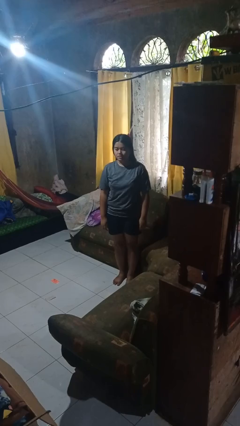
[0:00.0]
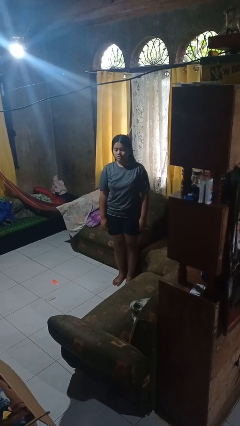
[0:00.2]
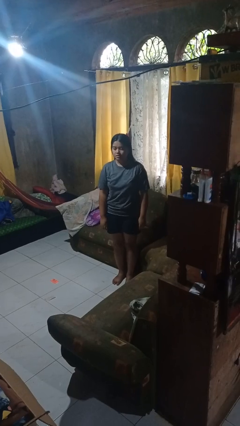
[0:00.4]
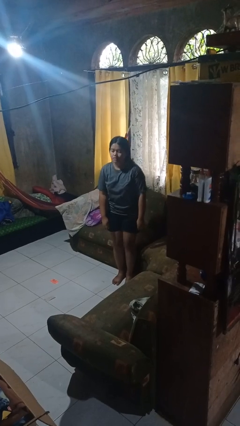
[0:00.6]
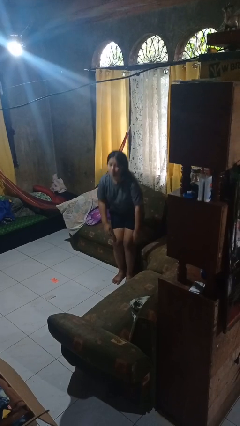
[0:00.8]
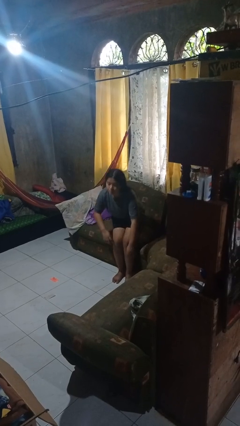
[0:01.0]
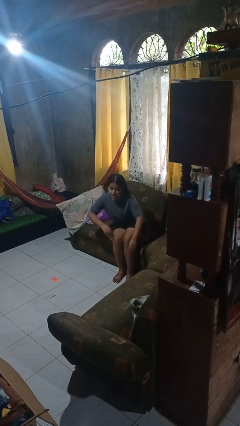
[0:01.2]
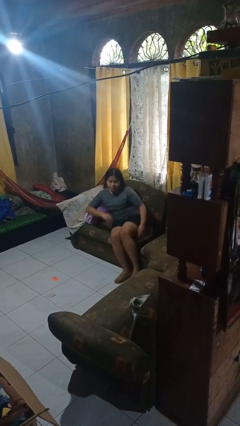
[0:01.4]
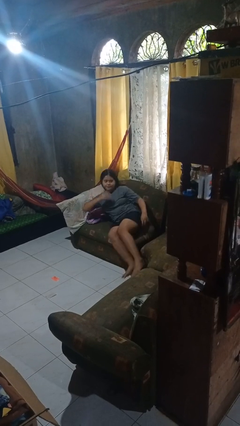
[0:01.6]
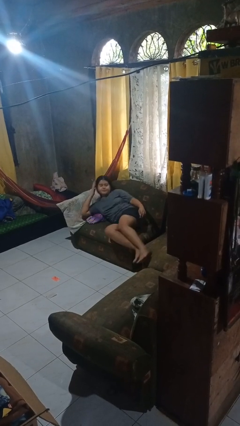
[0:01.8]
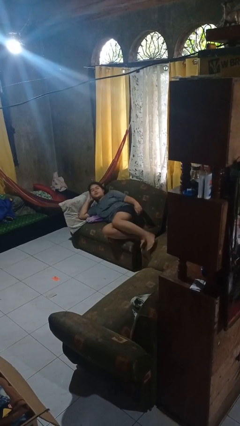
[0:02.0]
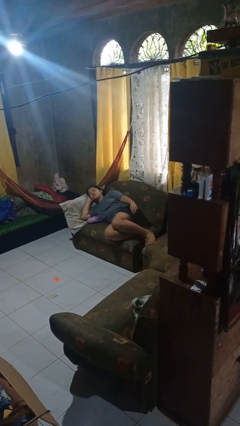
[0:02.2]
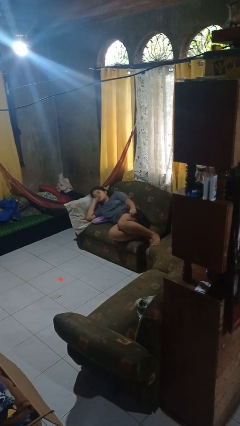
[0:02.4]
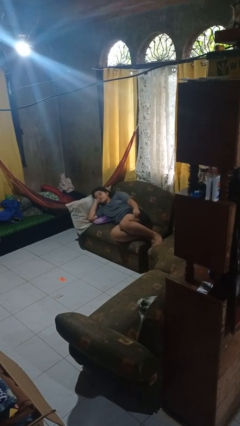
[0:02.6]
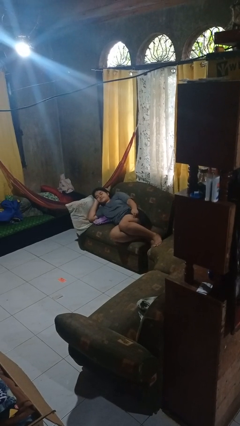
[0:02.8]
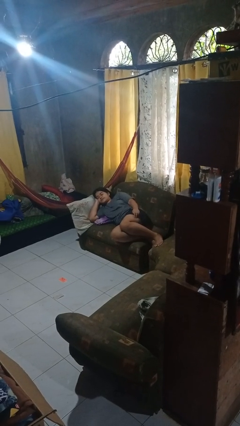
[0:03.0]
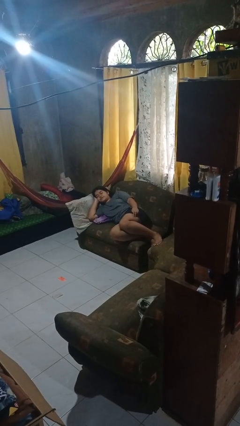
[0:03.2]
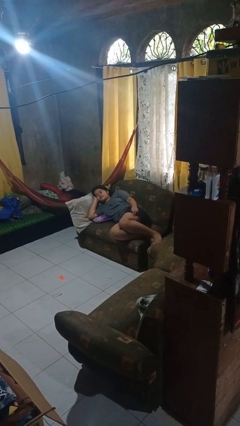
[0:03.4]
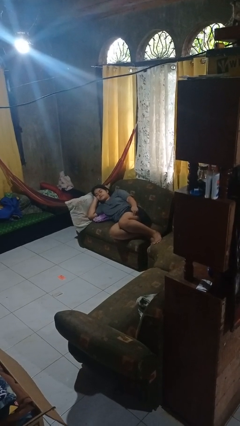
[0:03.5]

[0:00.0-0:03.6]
person lies down on couch

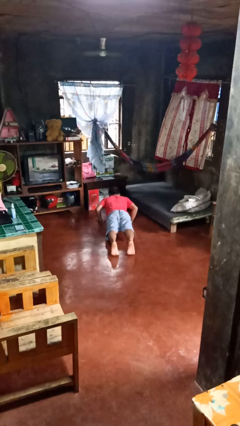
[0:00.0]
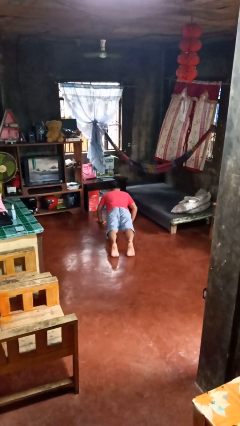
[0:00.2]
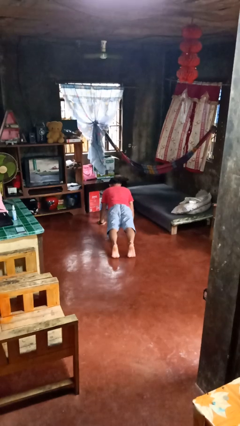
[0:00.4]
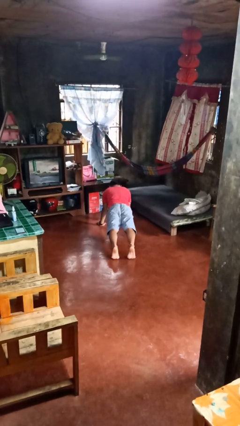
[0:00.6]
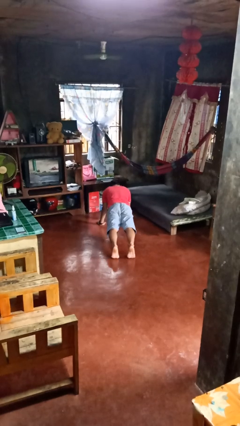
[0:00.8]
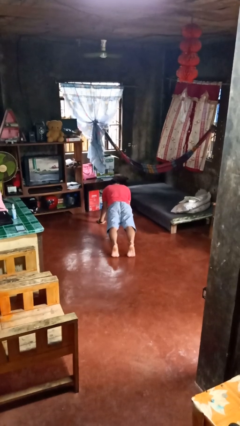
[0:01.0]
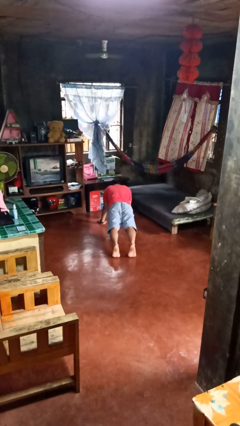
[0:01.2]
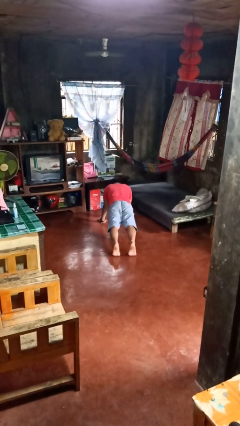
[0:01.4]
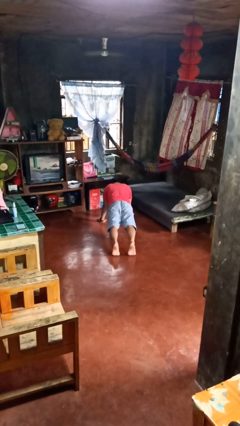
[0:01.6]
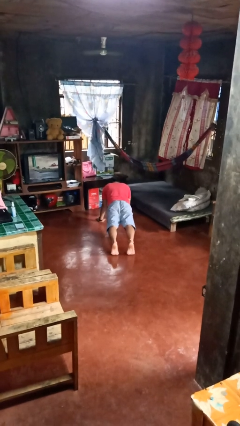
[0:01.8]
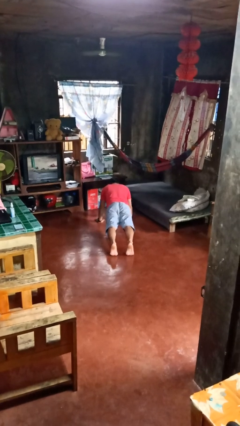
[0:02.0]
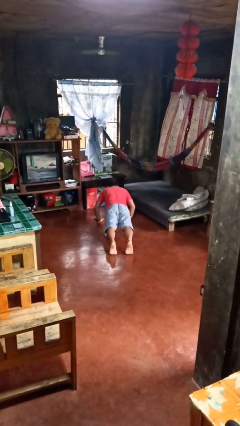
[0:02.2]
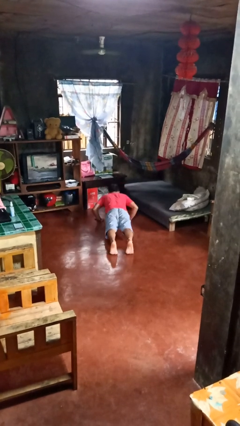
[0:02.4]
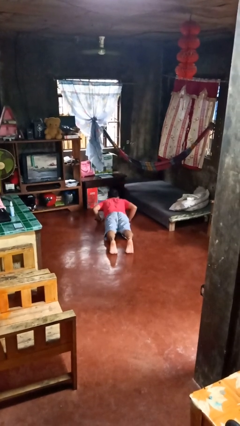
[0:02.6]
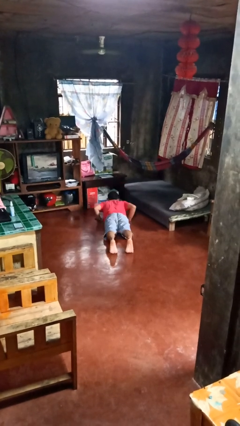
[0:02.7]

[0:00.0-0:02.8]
person exercises with pushup

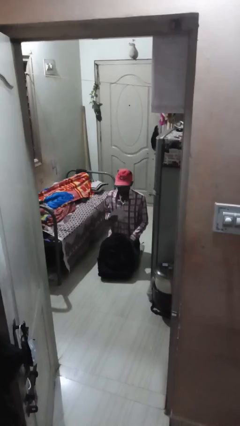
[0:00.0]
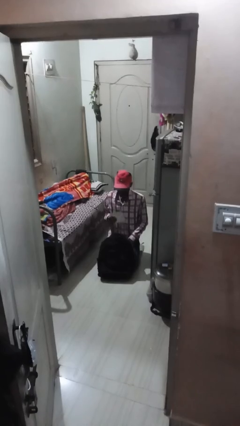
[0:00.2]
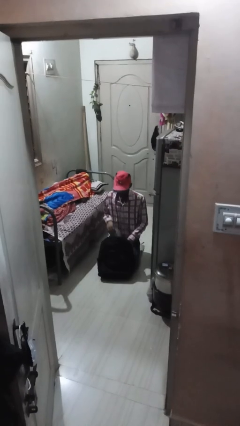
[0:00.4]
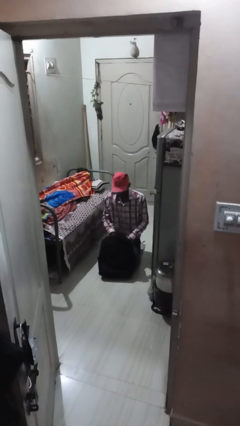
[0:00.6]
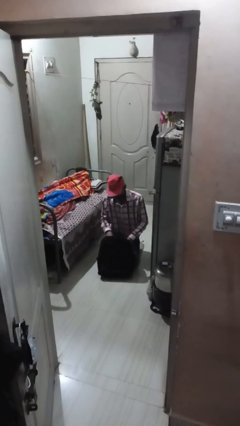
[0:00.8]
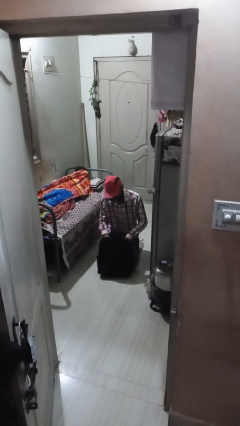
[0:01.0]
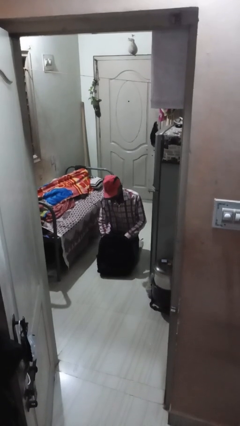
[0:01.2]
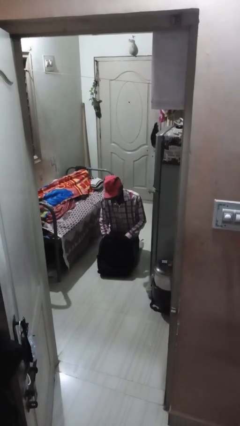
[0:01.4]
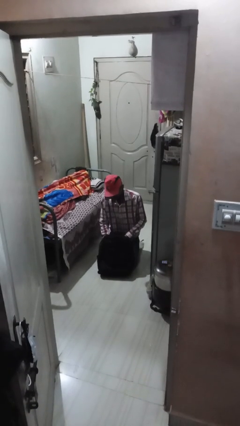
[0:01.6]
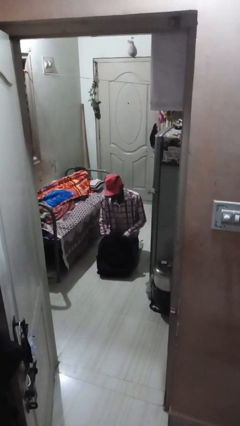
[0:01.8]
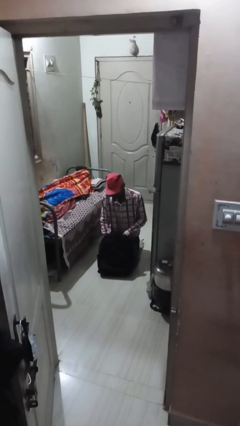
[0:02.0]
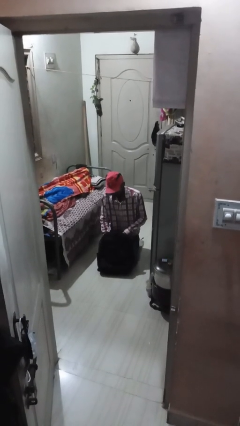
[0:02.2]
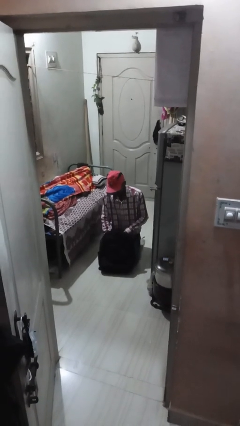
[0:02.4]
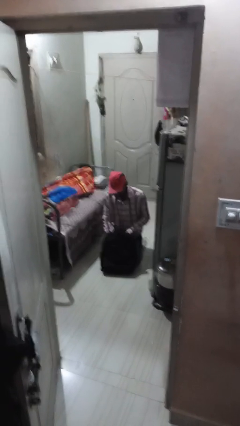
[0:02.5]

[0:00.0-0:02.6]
person puts object into backpack

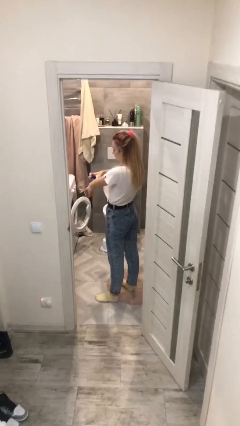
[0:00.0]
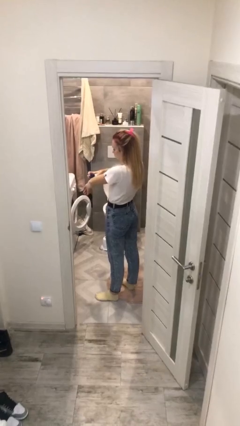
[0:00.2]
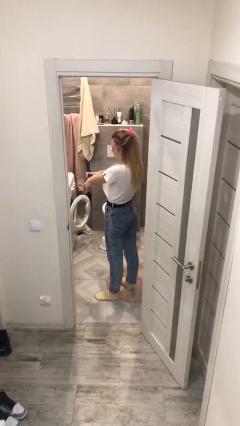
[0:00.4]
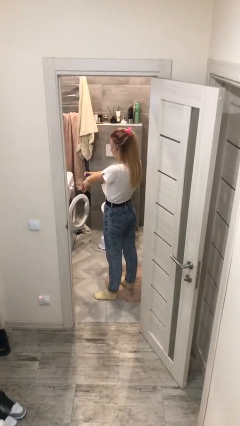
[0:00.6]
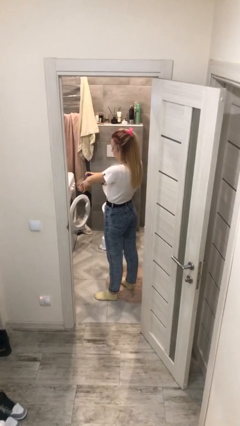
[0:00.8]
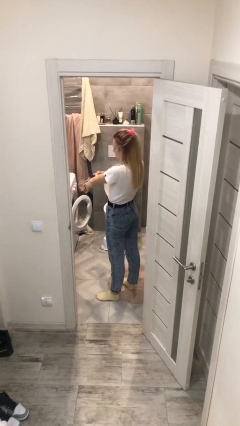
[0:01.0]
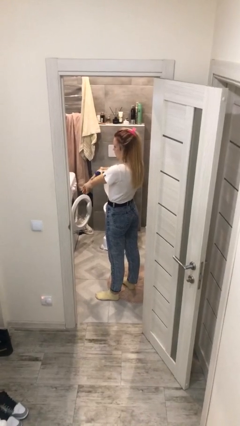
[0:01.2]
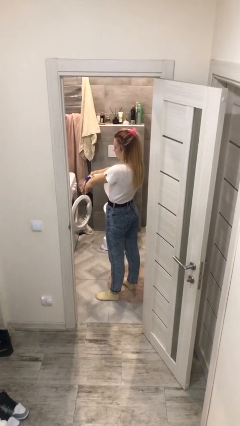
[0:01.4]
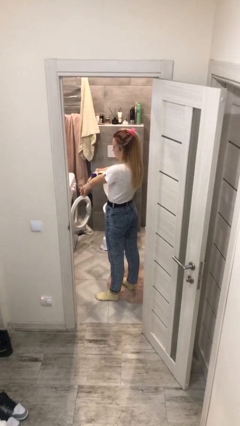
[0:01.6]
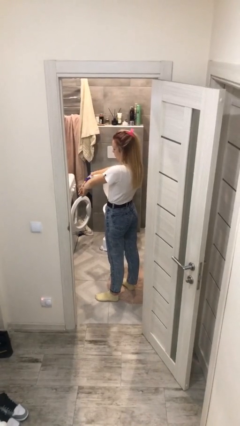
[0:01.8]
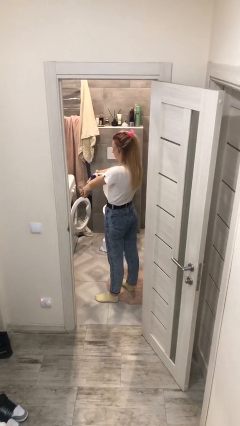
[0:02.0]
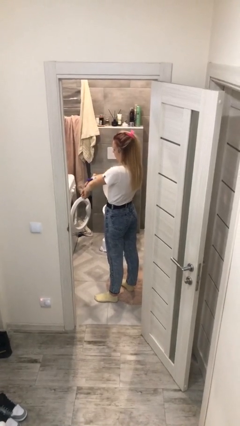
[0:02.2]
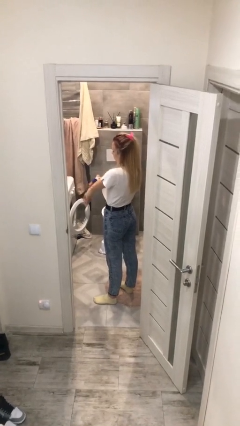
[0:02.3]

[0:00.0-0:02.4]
person applies sunscreen

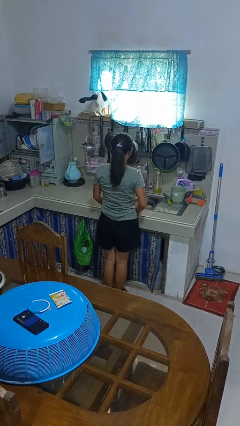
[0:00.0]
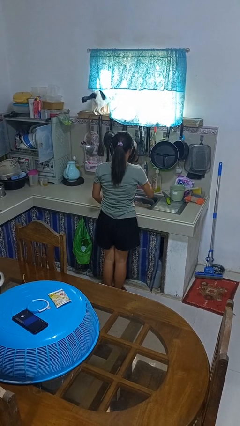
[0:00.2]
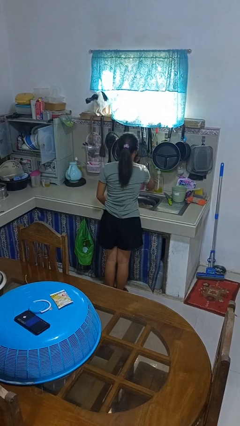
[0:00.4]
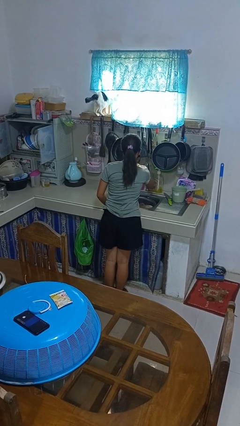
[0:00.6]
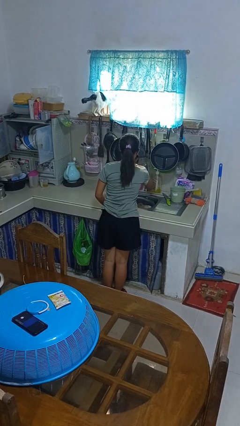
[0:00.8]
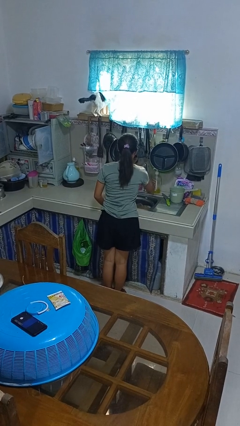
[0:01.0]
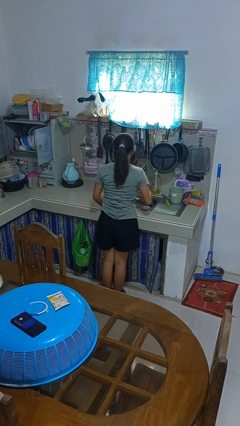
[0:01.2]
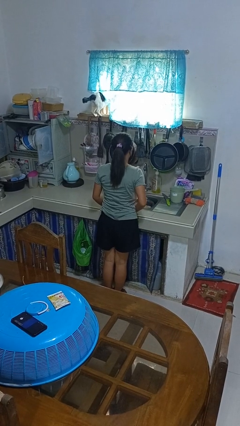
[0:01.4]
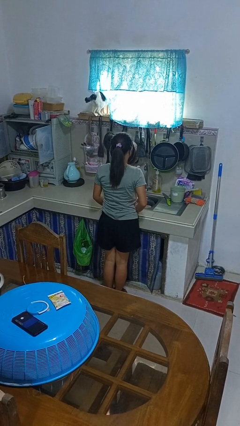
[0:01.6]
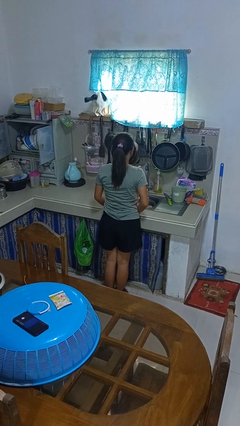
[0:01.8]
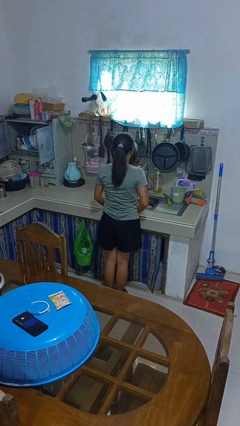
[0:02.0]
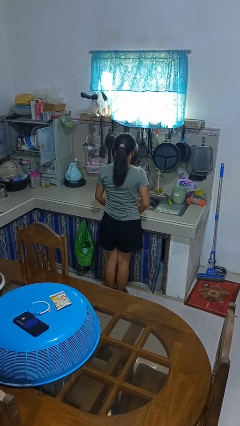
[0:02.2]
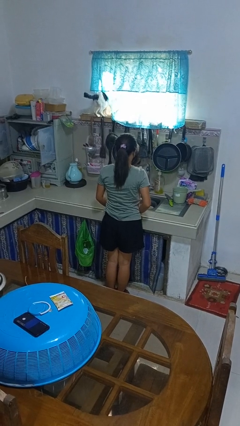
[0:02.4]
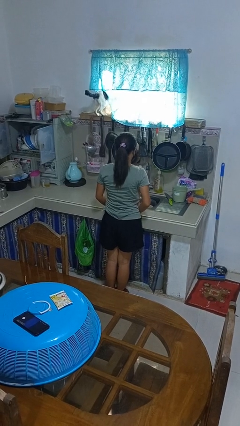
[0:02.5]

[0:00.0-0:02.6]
person turns on faucet

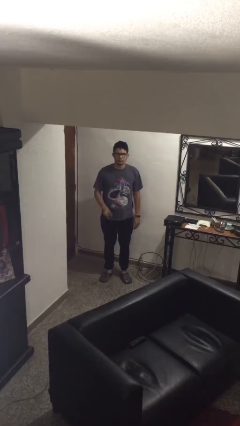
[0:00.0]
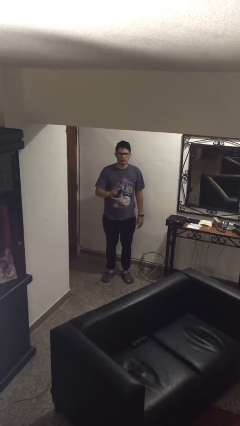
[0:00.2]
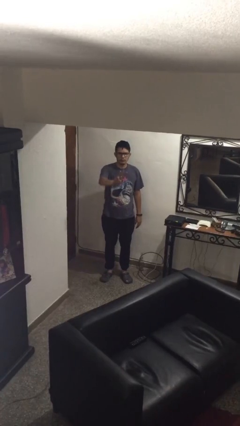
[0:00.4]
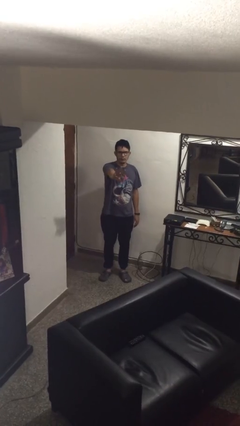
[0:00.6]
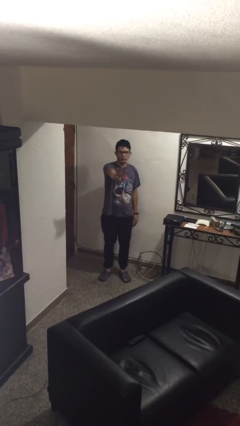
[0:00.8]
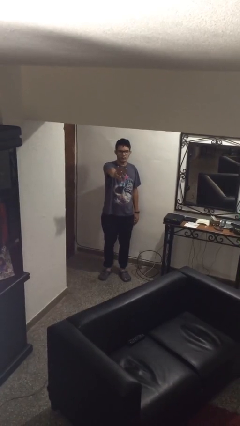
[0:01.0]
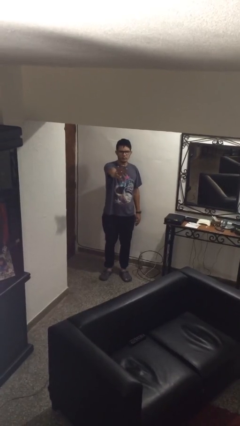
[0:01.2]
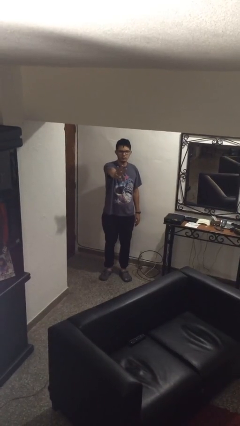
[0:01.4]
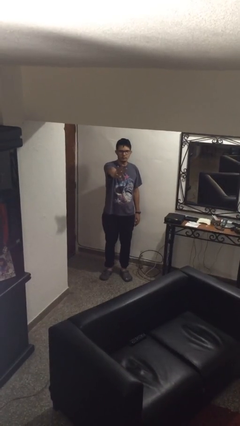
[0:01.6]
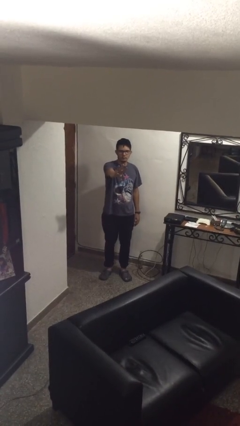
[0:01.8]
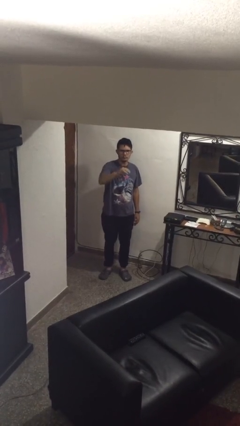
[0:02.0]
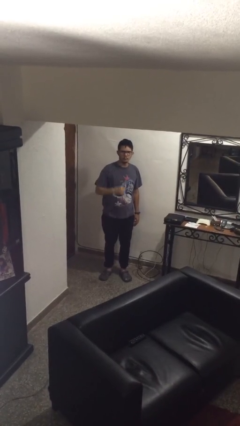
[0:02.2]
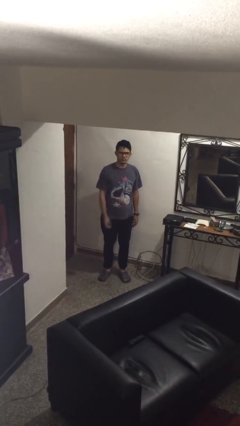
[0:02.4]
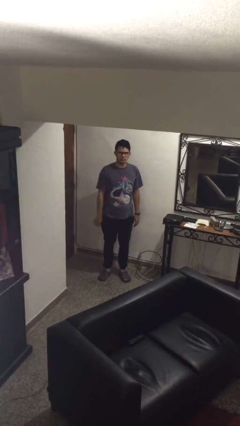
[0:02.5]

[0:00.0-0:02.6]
person gestures number three

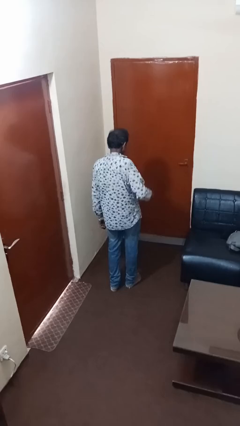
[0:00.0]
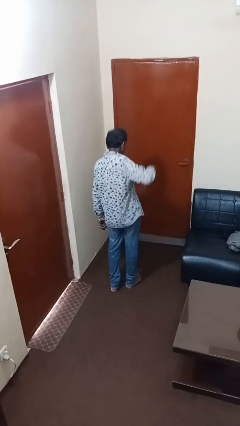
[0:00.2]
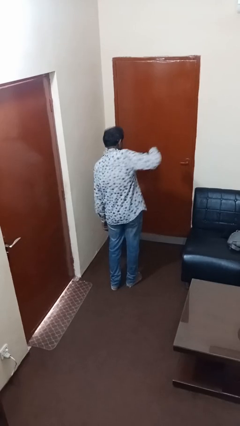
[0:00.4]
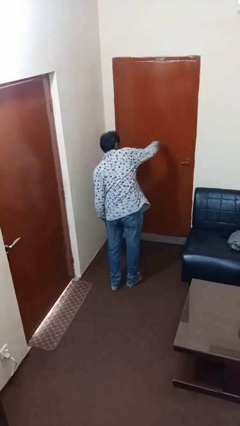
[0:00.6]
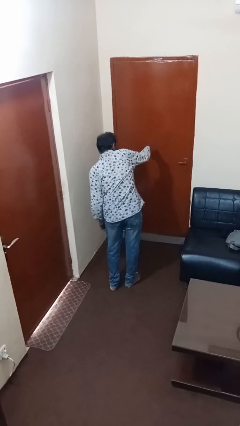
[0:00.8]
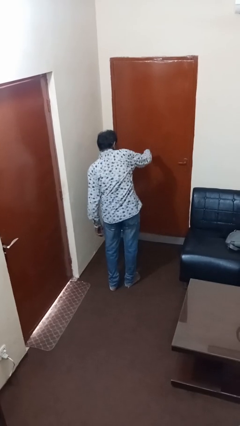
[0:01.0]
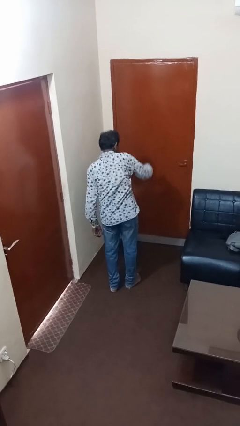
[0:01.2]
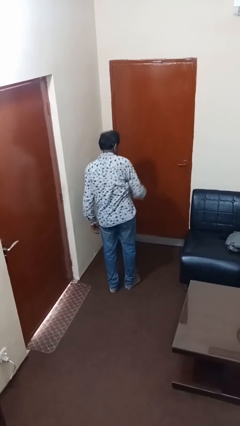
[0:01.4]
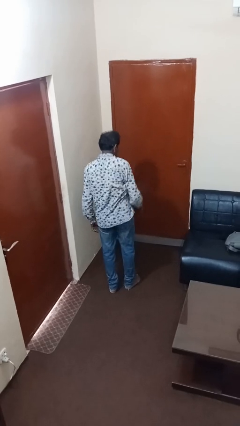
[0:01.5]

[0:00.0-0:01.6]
person karate chop
